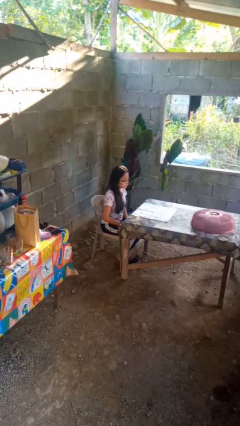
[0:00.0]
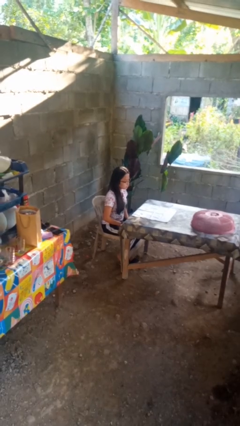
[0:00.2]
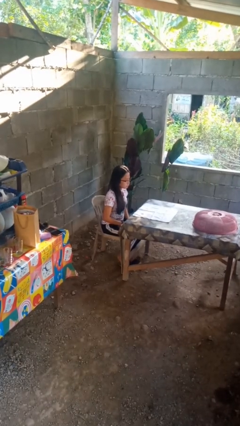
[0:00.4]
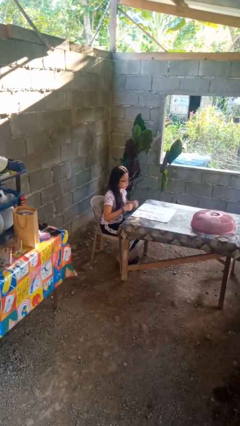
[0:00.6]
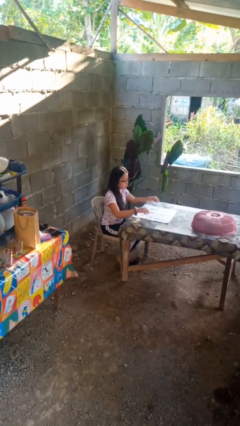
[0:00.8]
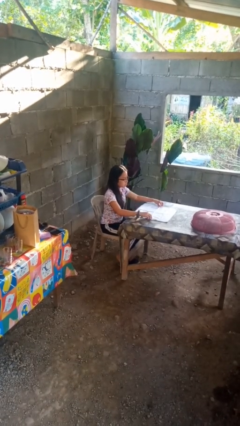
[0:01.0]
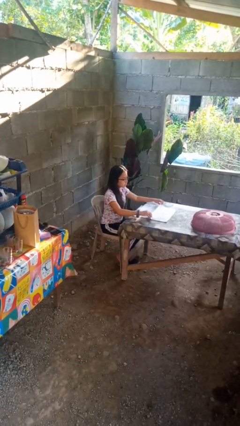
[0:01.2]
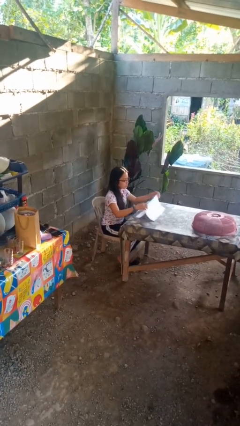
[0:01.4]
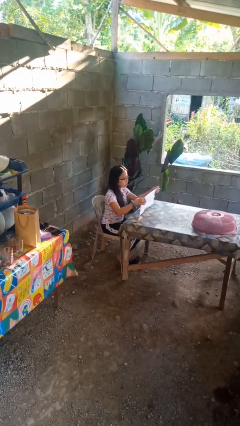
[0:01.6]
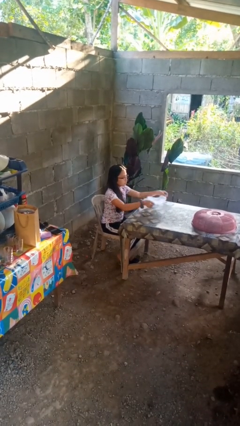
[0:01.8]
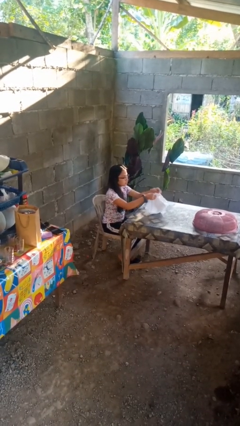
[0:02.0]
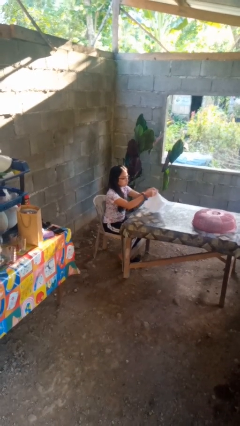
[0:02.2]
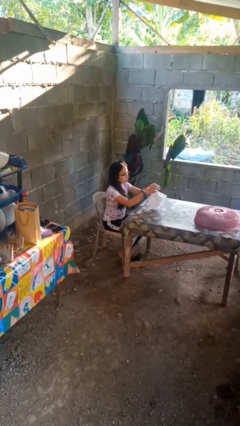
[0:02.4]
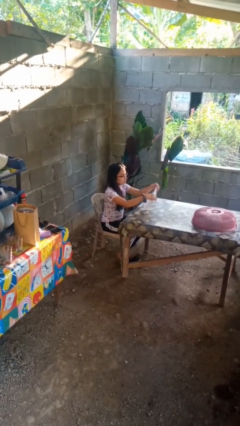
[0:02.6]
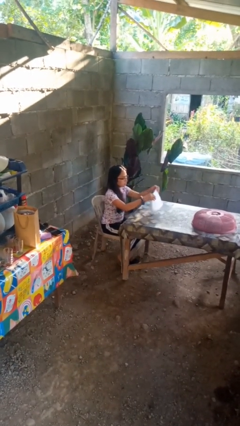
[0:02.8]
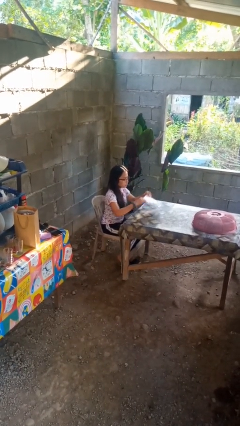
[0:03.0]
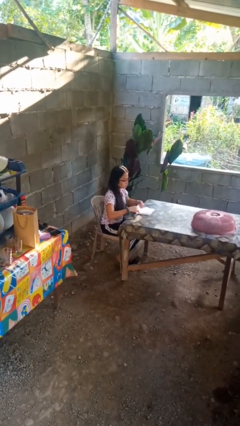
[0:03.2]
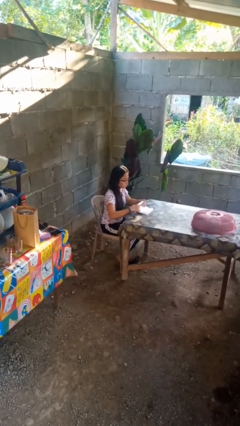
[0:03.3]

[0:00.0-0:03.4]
person folds tablecloth

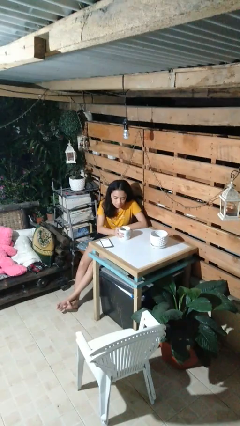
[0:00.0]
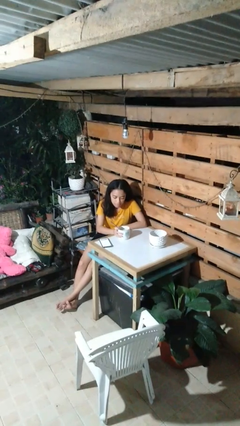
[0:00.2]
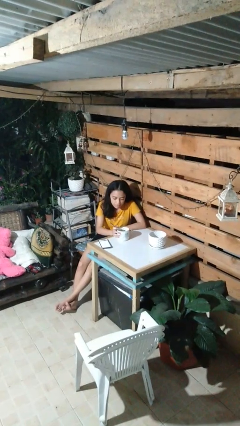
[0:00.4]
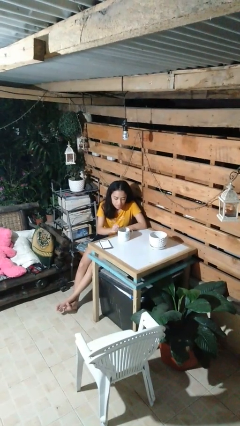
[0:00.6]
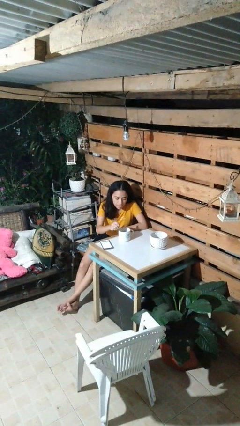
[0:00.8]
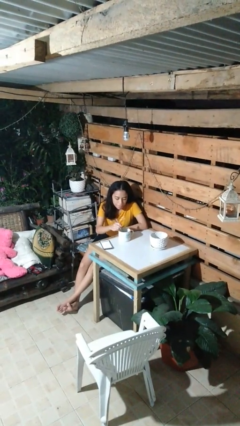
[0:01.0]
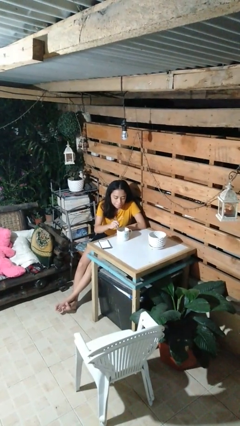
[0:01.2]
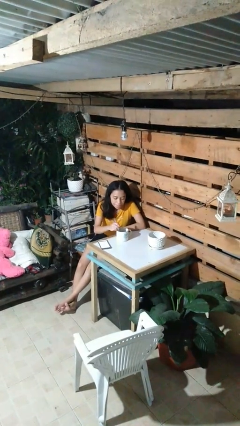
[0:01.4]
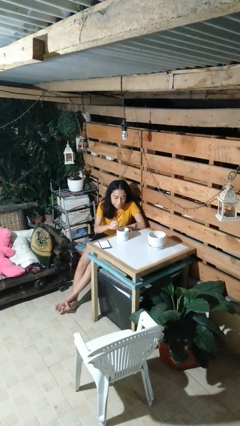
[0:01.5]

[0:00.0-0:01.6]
person stirs mug

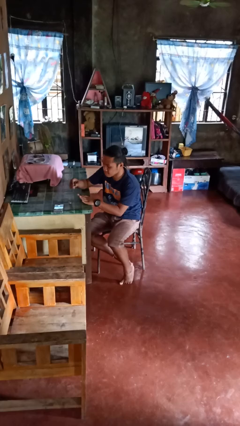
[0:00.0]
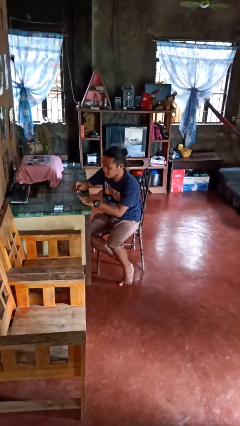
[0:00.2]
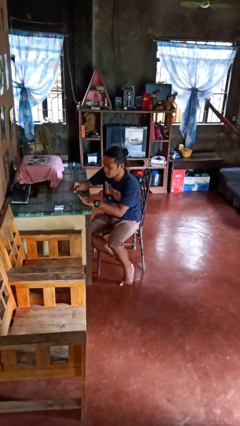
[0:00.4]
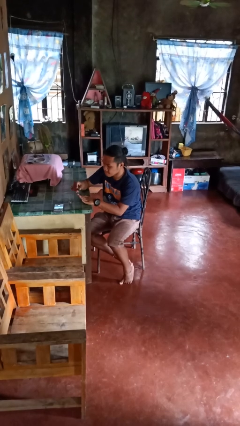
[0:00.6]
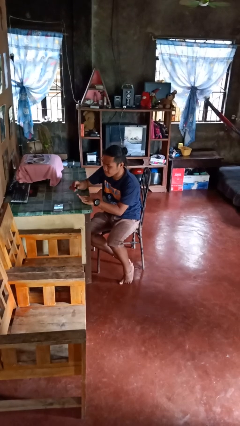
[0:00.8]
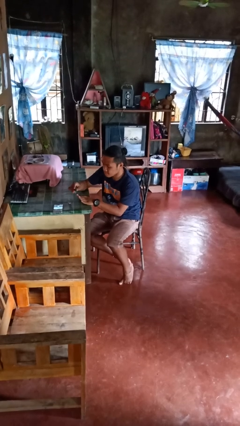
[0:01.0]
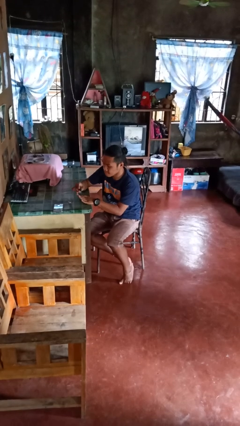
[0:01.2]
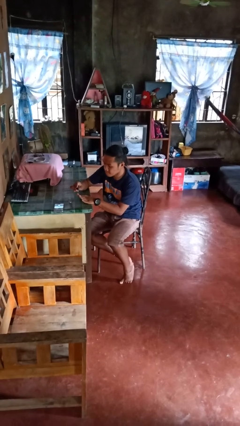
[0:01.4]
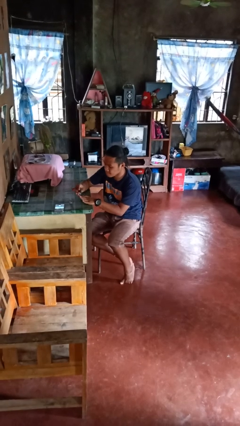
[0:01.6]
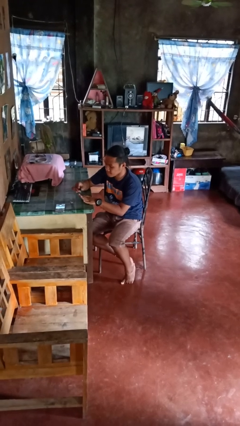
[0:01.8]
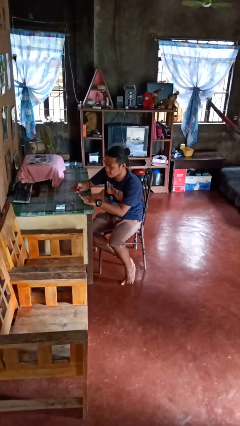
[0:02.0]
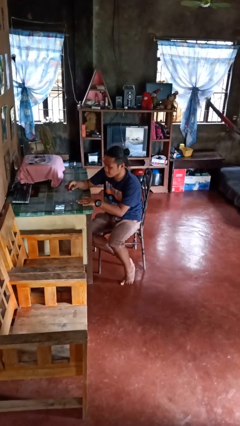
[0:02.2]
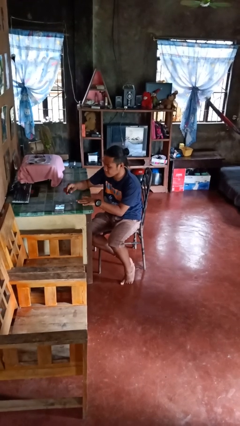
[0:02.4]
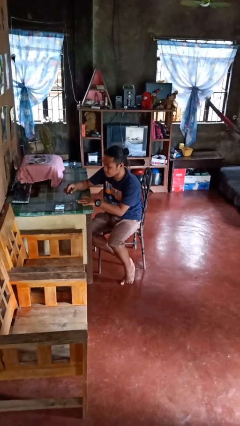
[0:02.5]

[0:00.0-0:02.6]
person paints fingernails

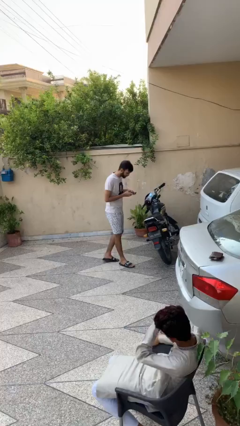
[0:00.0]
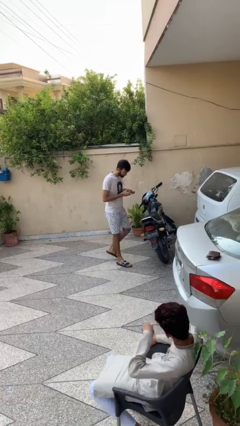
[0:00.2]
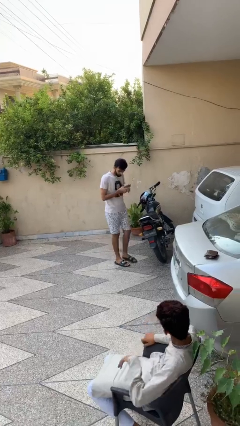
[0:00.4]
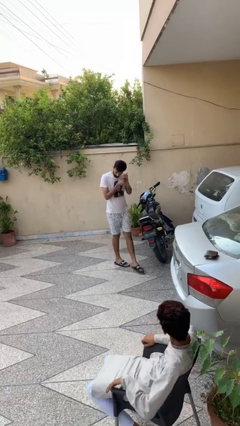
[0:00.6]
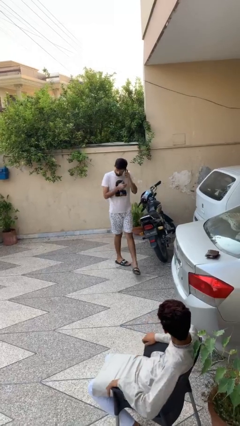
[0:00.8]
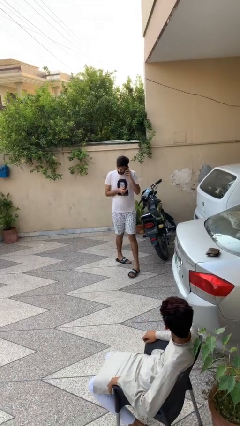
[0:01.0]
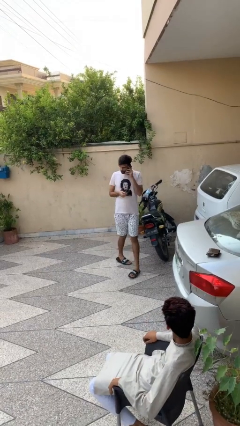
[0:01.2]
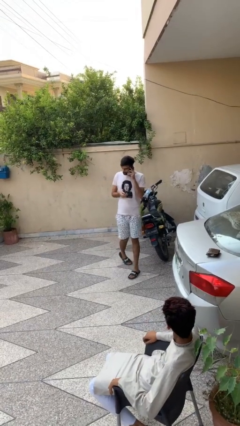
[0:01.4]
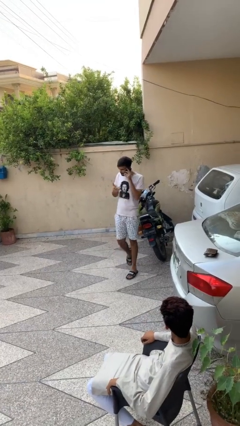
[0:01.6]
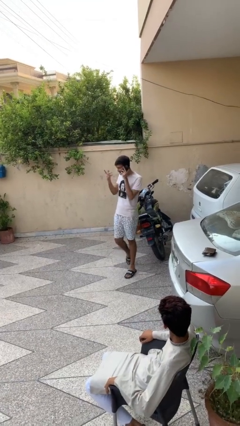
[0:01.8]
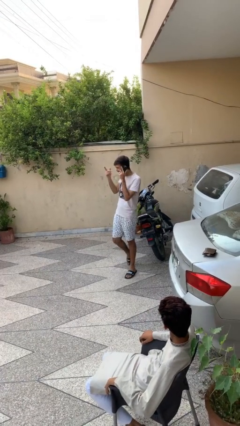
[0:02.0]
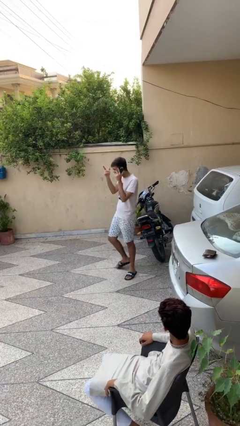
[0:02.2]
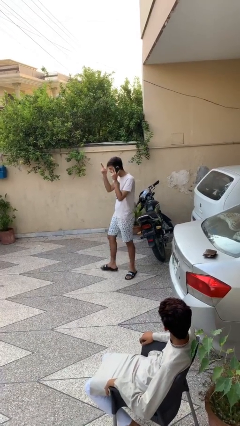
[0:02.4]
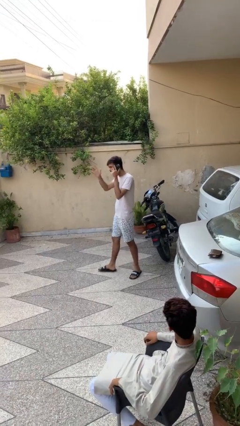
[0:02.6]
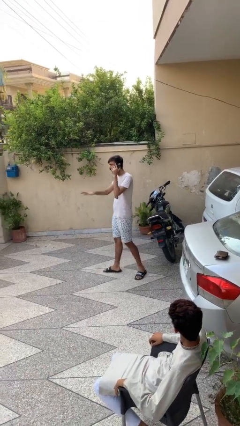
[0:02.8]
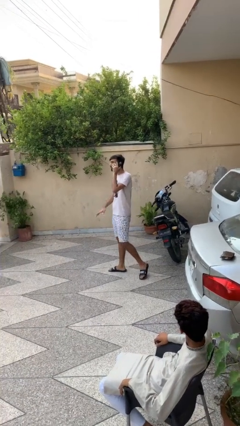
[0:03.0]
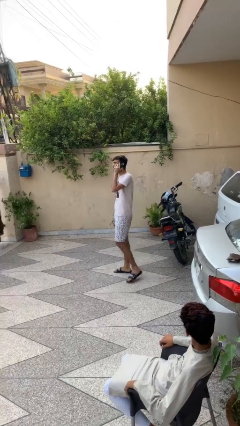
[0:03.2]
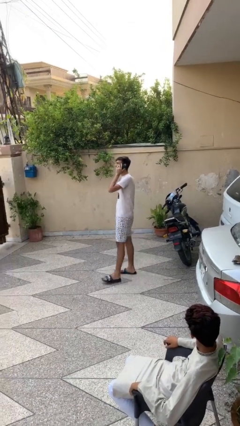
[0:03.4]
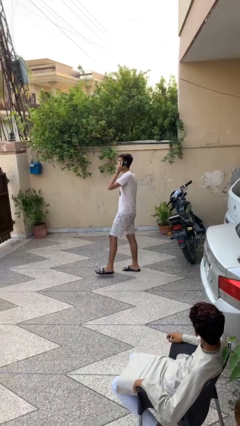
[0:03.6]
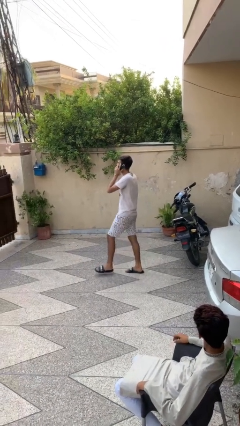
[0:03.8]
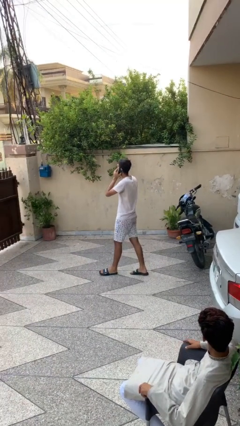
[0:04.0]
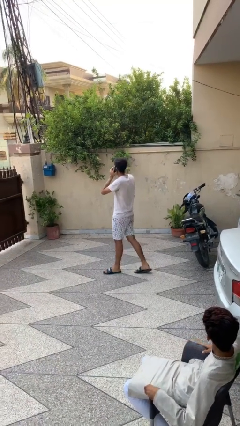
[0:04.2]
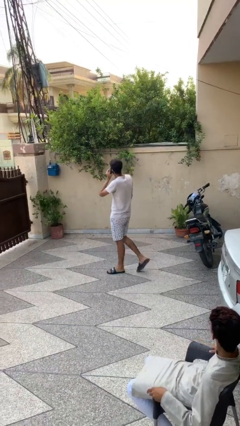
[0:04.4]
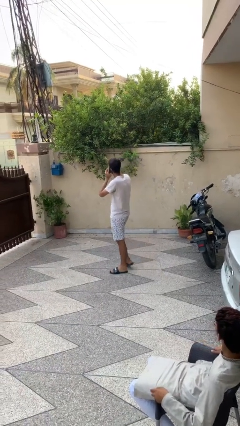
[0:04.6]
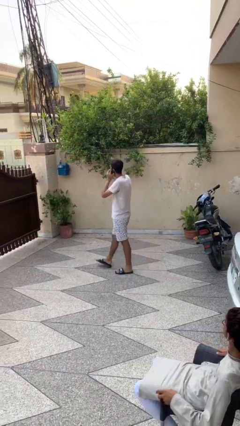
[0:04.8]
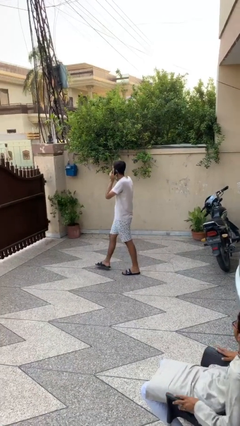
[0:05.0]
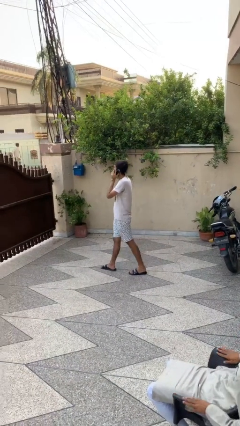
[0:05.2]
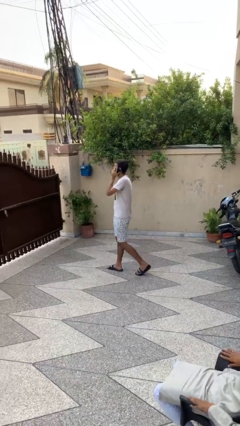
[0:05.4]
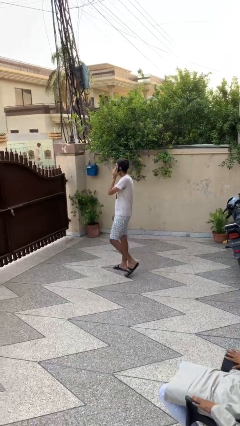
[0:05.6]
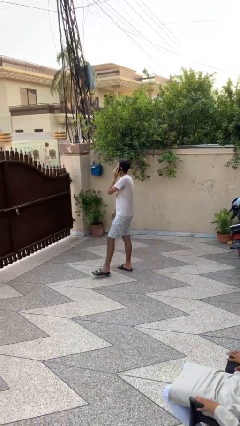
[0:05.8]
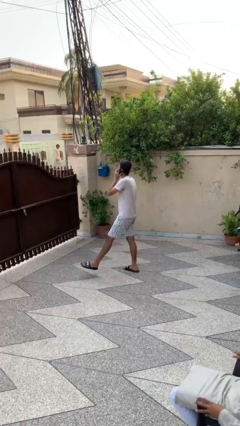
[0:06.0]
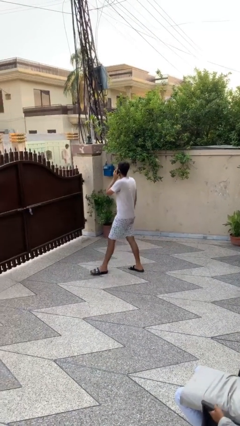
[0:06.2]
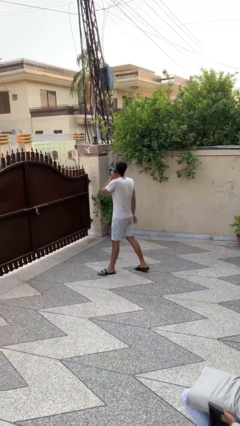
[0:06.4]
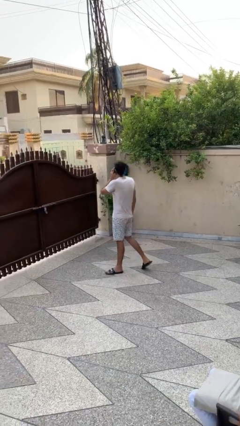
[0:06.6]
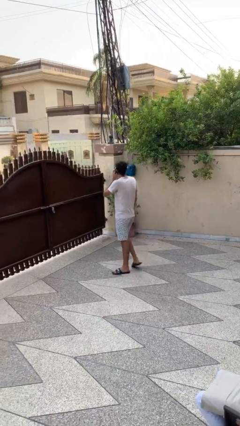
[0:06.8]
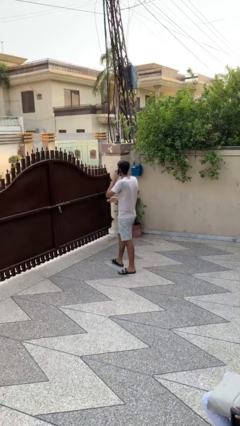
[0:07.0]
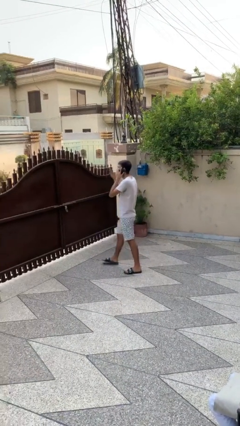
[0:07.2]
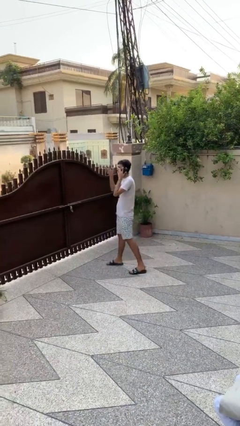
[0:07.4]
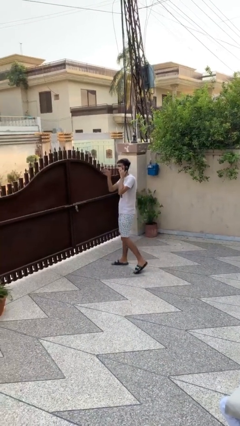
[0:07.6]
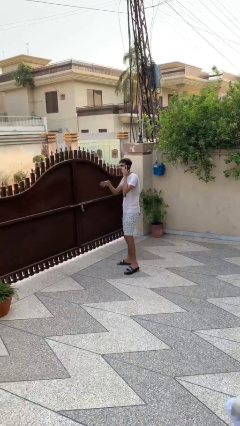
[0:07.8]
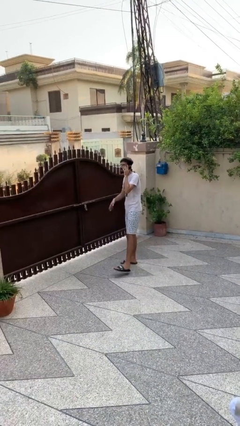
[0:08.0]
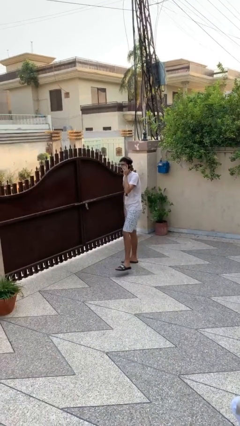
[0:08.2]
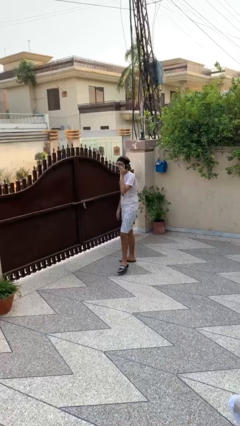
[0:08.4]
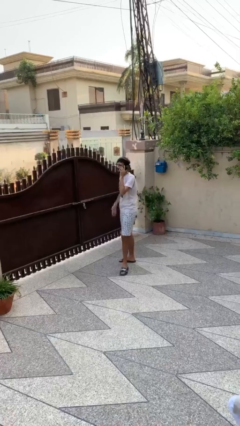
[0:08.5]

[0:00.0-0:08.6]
person talks on phone

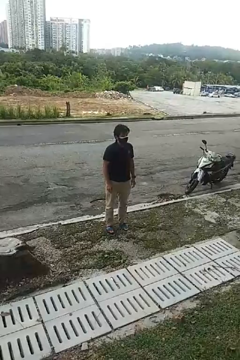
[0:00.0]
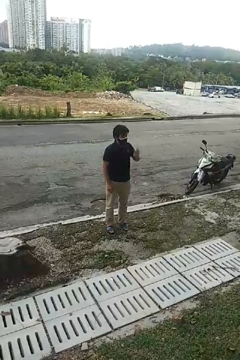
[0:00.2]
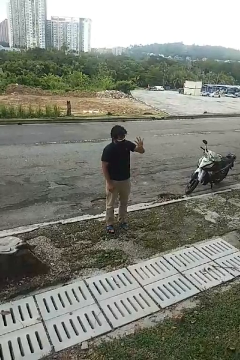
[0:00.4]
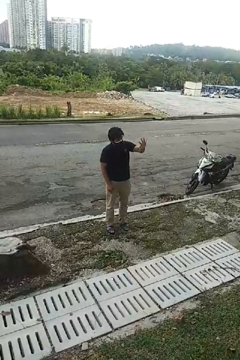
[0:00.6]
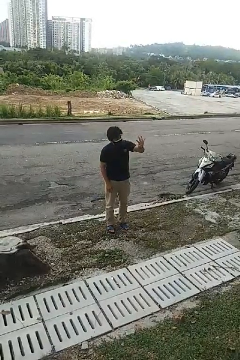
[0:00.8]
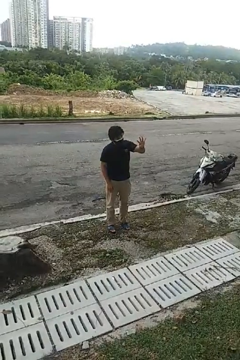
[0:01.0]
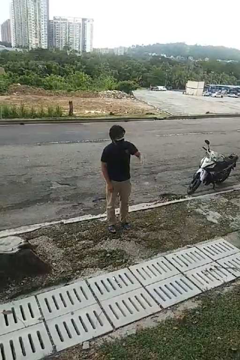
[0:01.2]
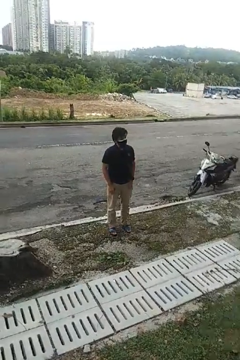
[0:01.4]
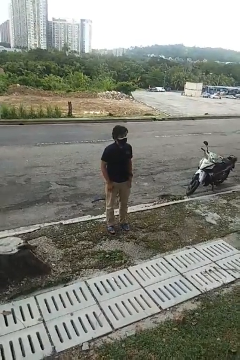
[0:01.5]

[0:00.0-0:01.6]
person gestures number four
